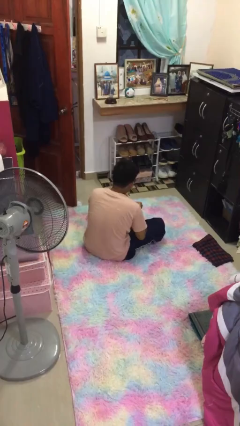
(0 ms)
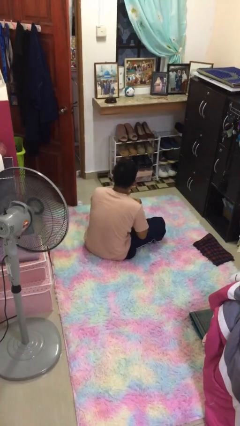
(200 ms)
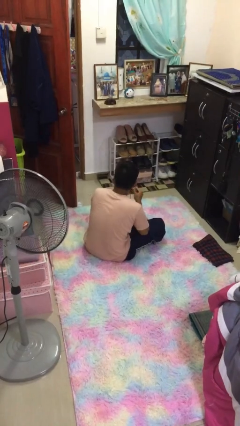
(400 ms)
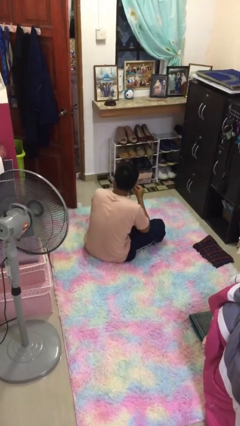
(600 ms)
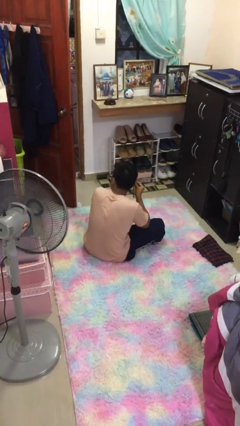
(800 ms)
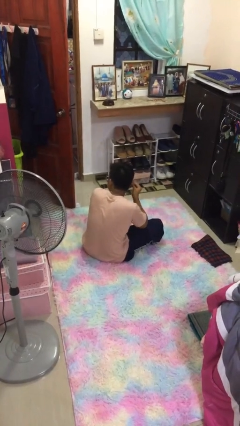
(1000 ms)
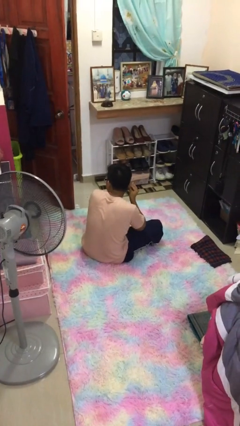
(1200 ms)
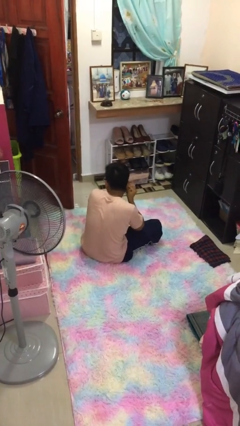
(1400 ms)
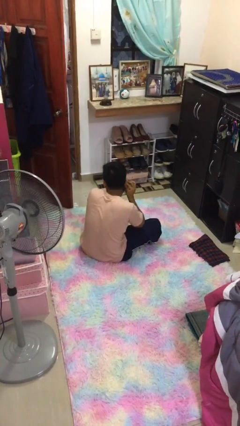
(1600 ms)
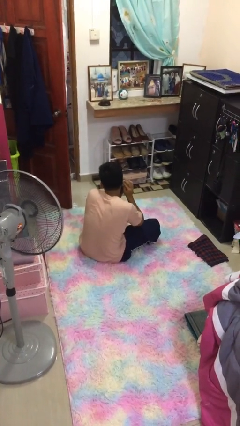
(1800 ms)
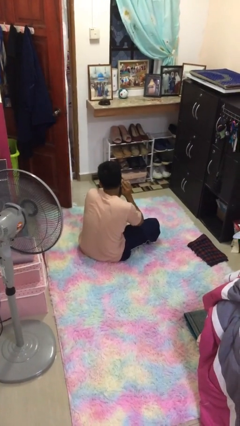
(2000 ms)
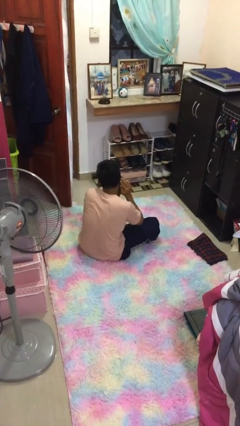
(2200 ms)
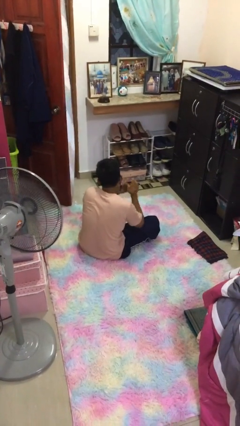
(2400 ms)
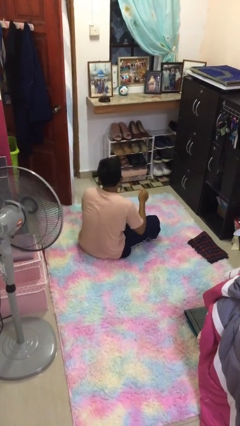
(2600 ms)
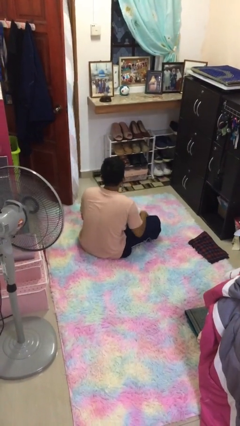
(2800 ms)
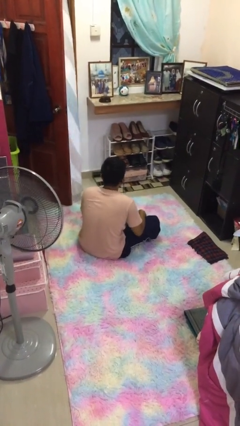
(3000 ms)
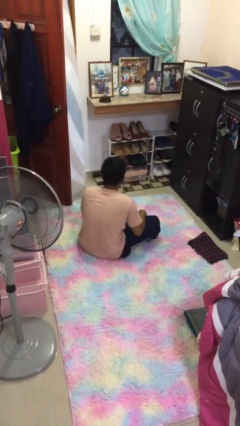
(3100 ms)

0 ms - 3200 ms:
person puts on earrings

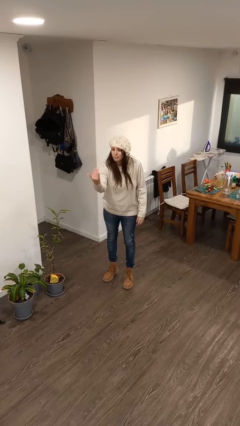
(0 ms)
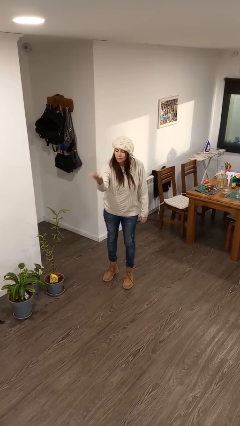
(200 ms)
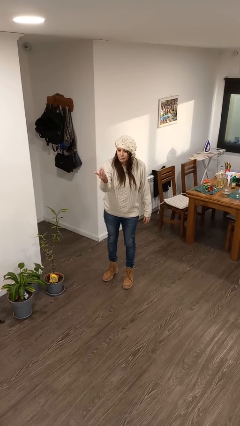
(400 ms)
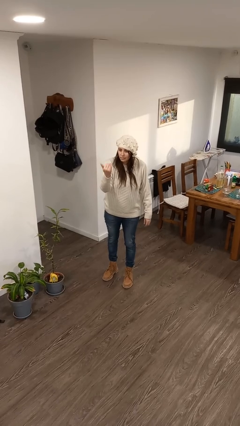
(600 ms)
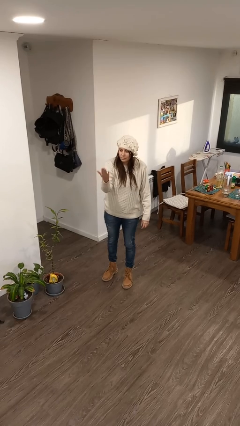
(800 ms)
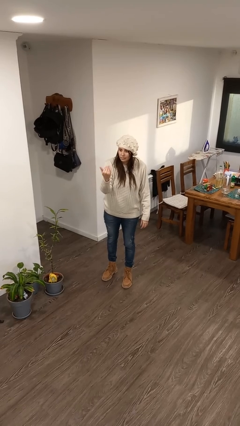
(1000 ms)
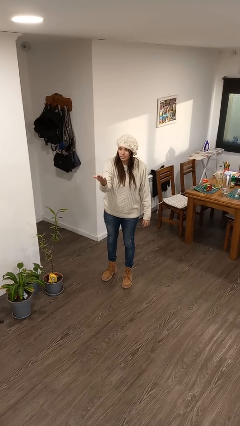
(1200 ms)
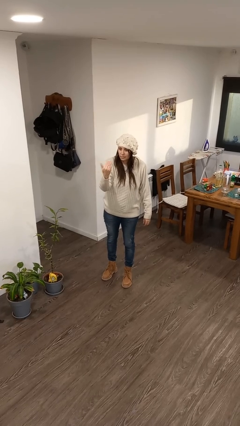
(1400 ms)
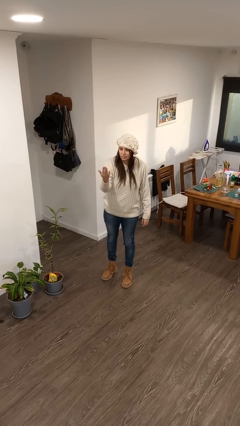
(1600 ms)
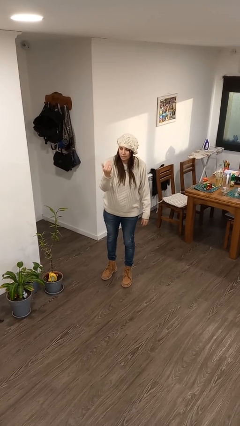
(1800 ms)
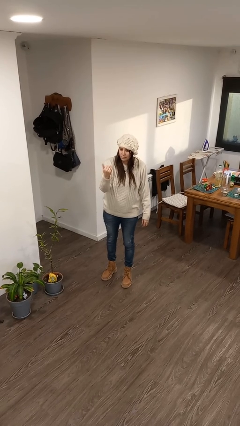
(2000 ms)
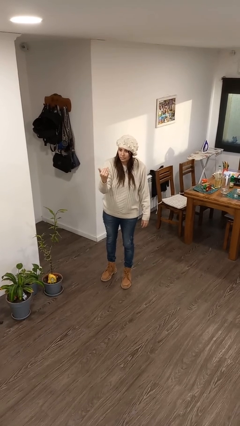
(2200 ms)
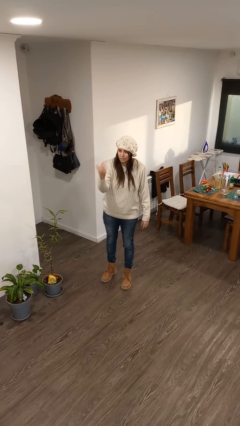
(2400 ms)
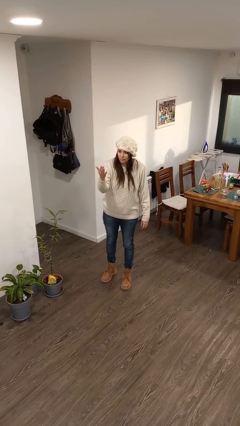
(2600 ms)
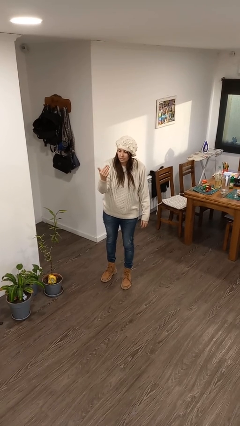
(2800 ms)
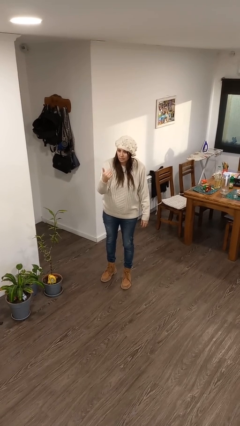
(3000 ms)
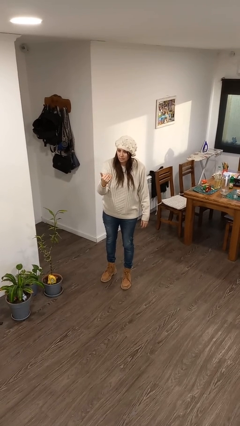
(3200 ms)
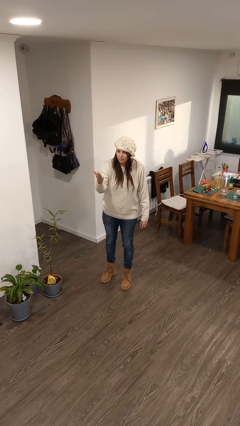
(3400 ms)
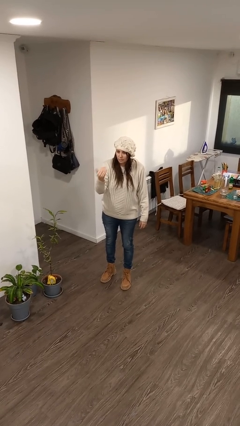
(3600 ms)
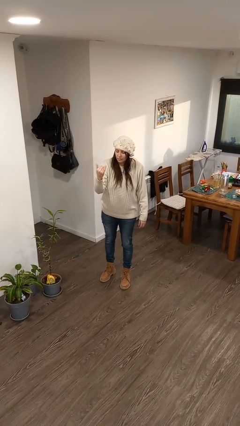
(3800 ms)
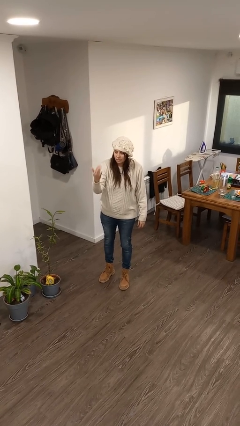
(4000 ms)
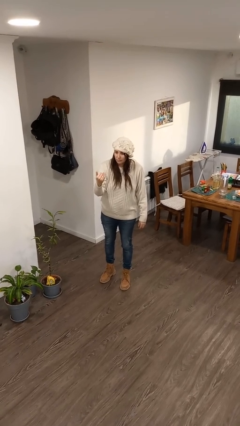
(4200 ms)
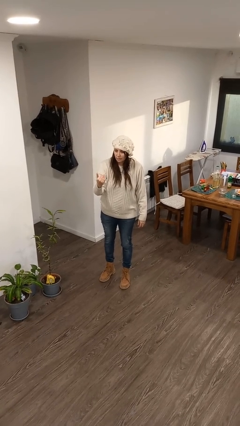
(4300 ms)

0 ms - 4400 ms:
person gestures come here

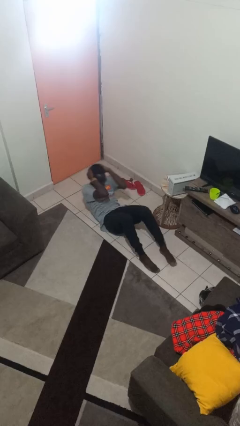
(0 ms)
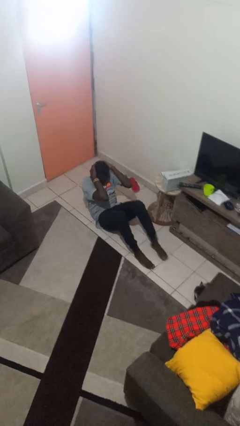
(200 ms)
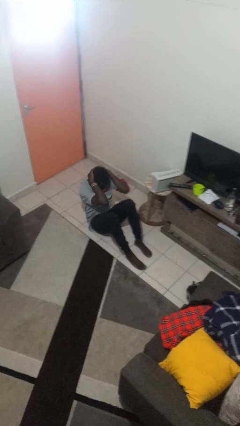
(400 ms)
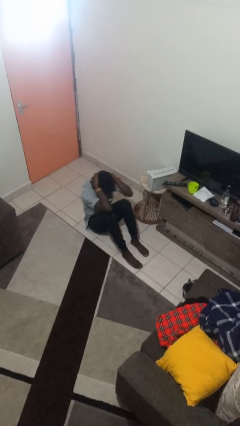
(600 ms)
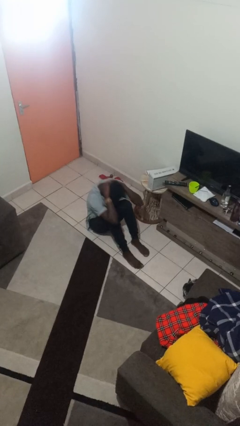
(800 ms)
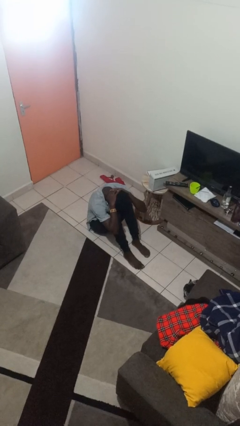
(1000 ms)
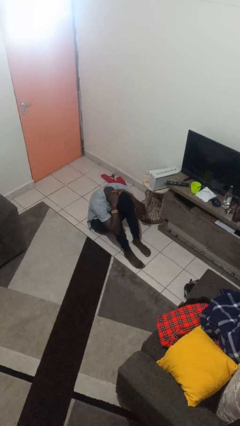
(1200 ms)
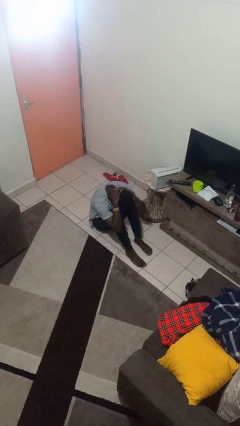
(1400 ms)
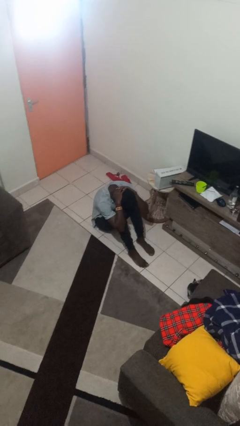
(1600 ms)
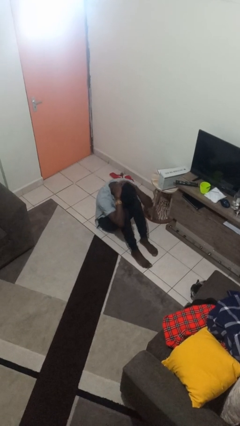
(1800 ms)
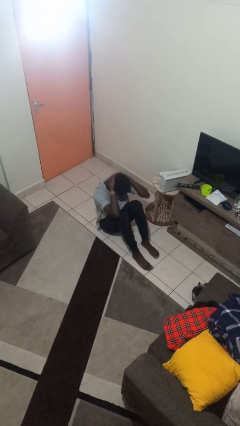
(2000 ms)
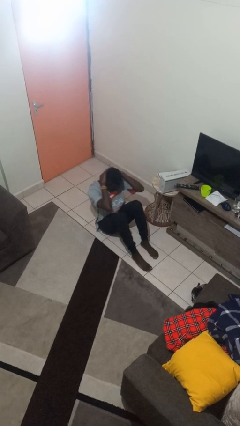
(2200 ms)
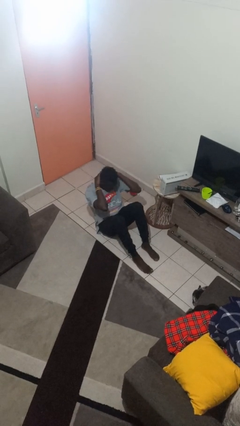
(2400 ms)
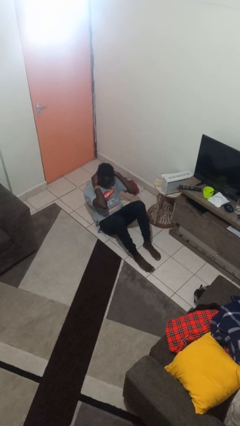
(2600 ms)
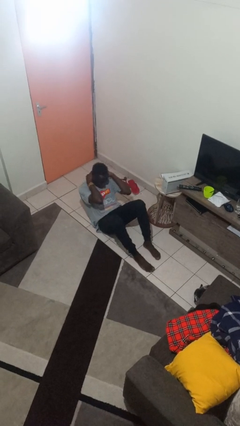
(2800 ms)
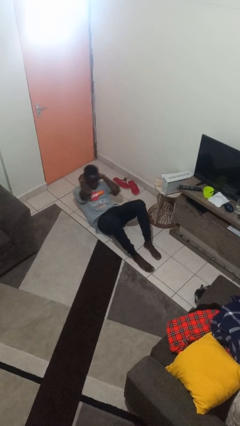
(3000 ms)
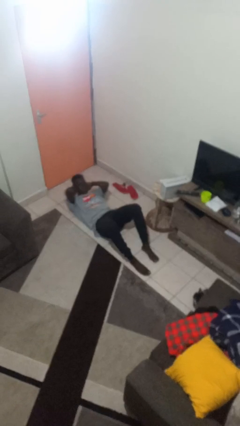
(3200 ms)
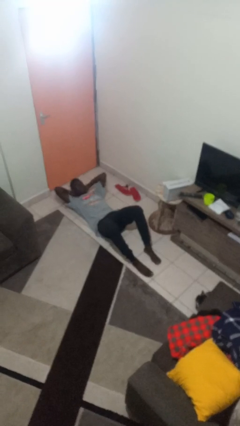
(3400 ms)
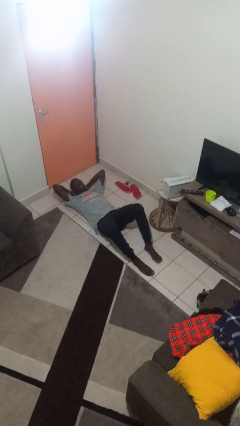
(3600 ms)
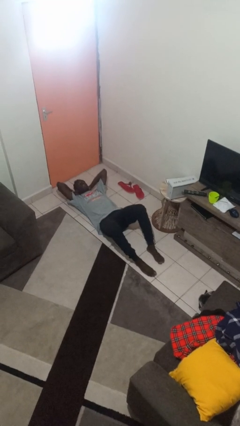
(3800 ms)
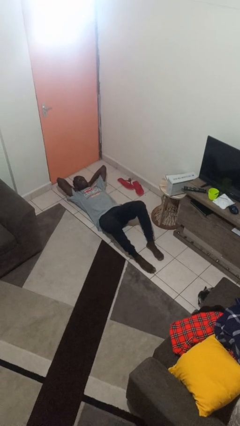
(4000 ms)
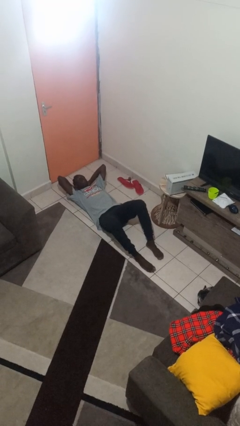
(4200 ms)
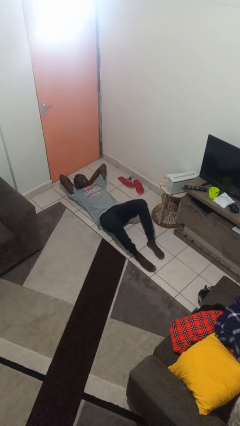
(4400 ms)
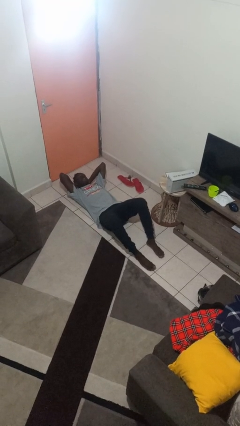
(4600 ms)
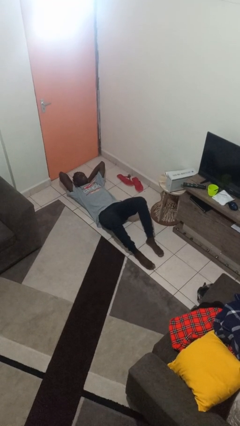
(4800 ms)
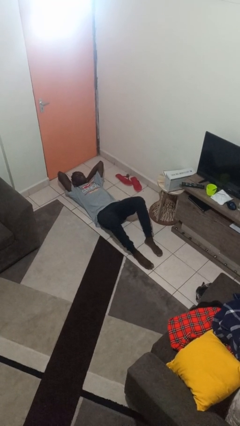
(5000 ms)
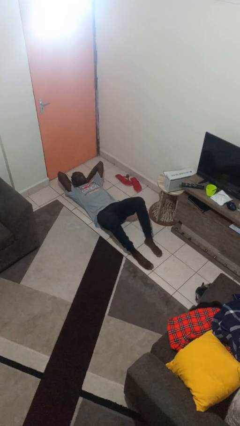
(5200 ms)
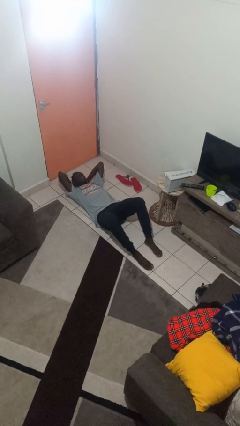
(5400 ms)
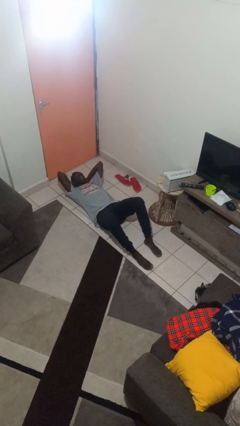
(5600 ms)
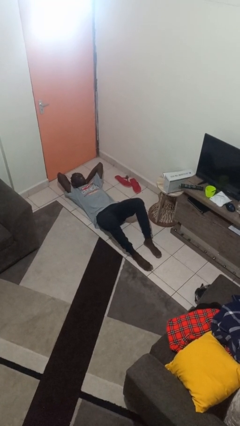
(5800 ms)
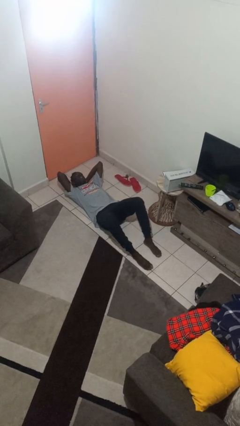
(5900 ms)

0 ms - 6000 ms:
person exercises with situp

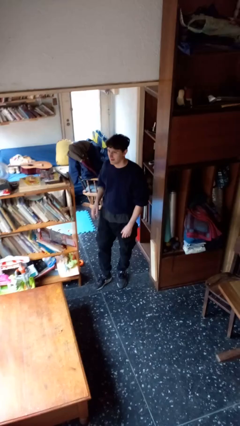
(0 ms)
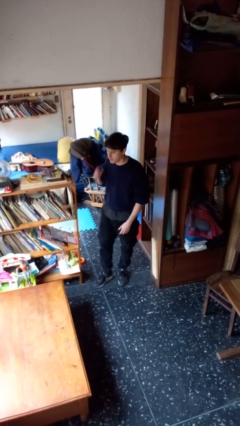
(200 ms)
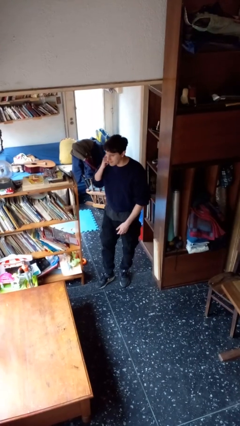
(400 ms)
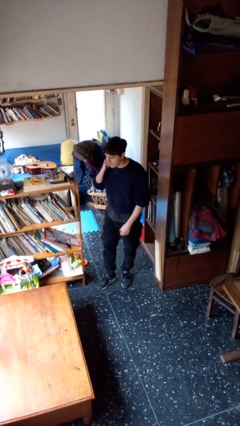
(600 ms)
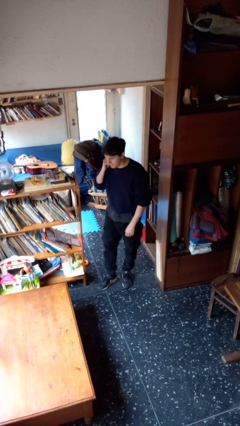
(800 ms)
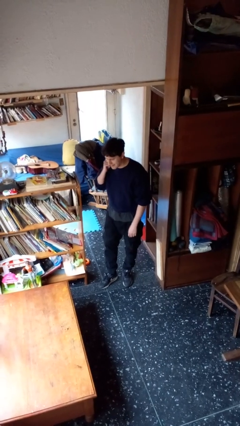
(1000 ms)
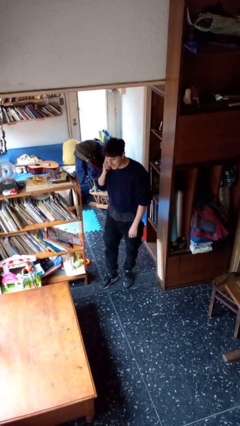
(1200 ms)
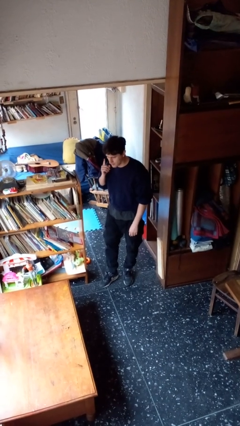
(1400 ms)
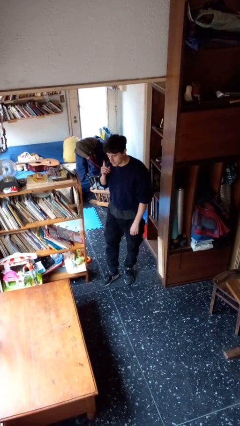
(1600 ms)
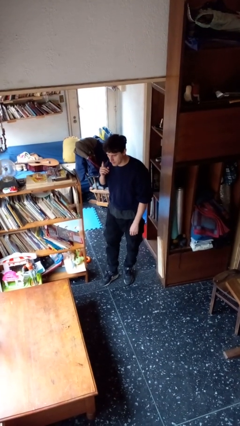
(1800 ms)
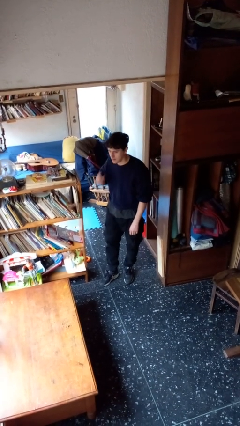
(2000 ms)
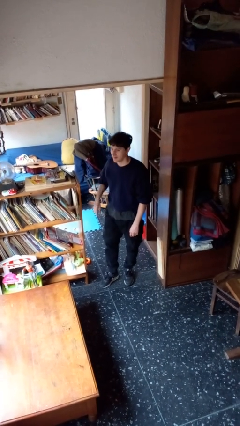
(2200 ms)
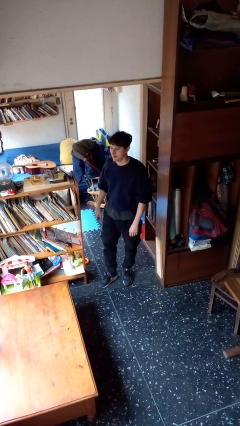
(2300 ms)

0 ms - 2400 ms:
person gestures listen closely

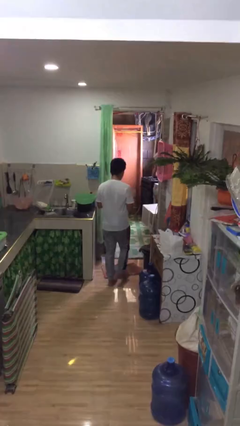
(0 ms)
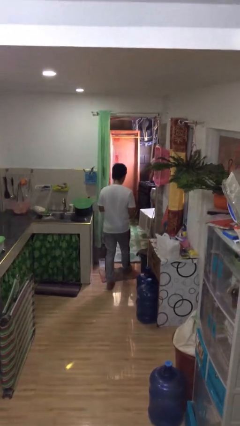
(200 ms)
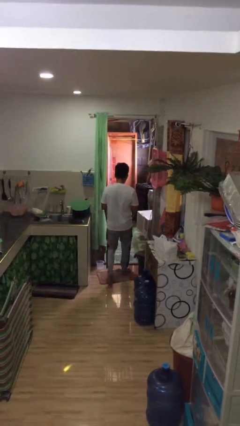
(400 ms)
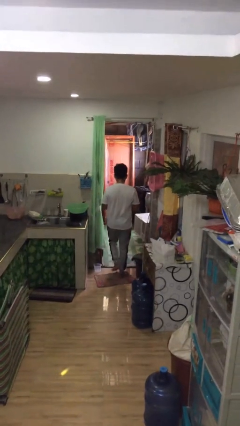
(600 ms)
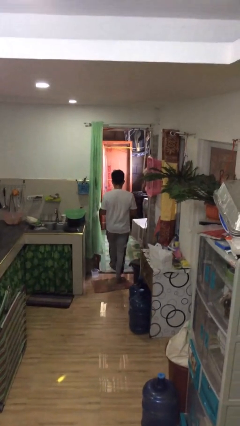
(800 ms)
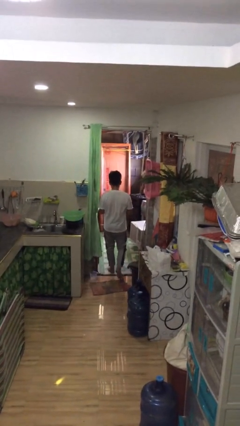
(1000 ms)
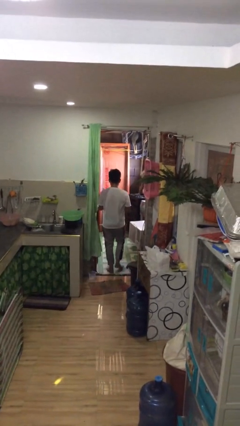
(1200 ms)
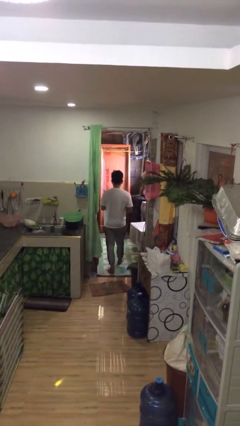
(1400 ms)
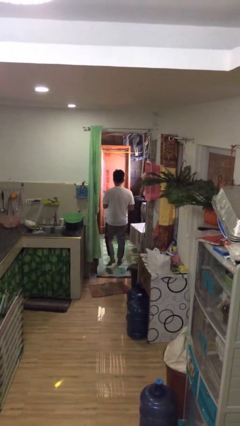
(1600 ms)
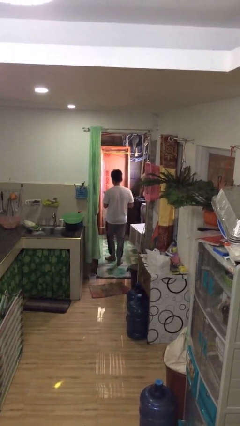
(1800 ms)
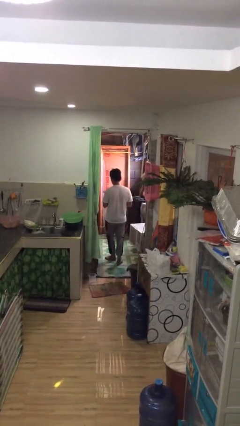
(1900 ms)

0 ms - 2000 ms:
person exits scene through structure
